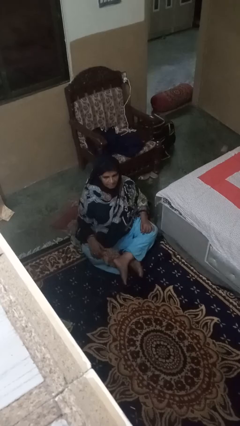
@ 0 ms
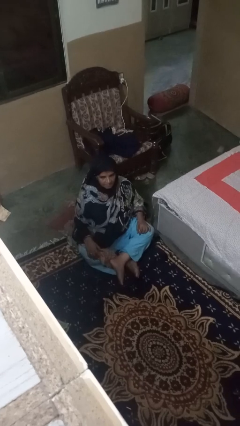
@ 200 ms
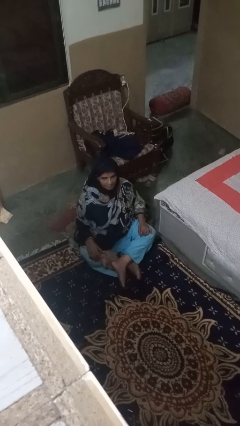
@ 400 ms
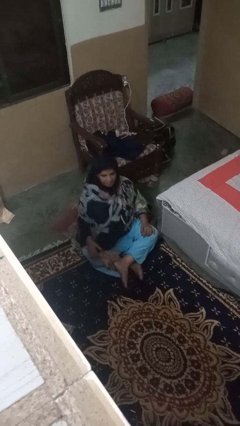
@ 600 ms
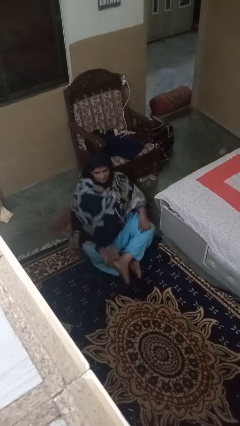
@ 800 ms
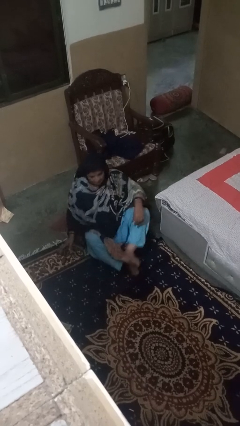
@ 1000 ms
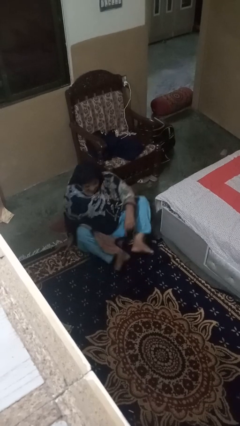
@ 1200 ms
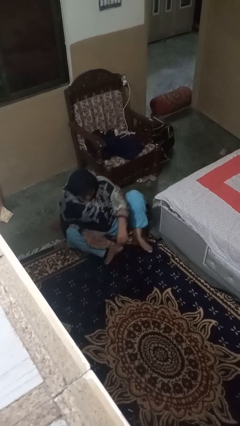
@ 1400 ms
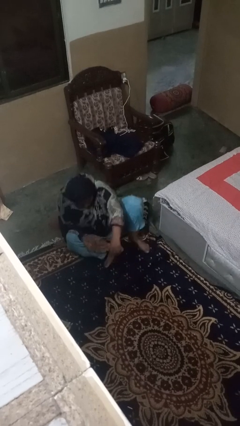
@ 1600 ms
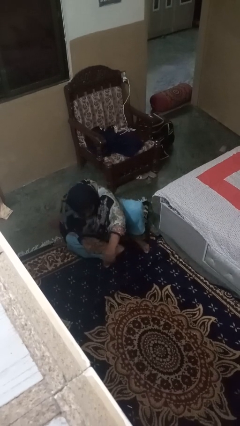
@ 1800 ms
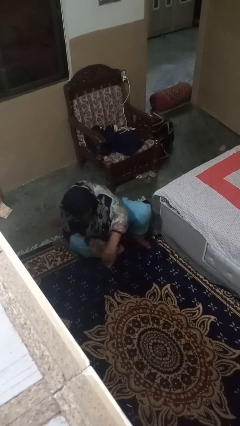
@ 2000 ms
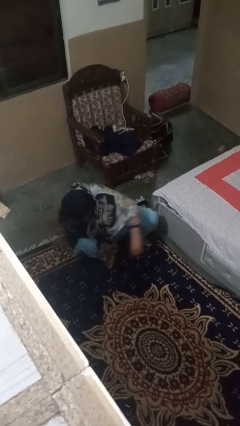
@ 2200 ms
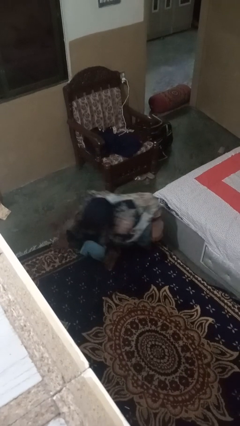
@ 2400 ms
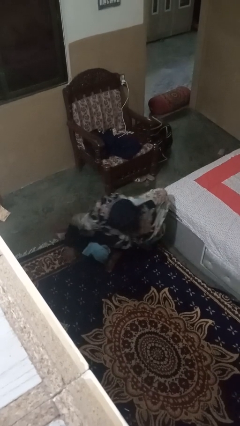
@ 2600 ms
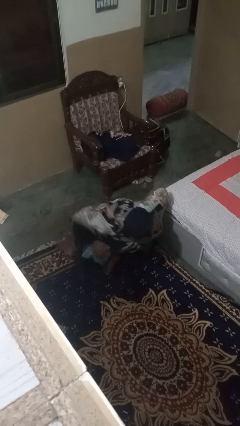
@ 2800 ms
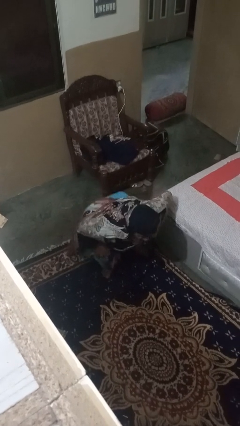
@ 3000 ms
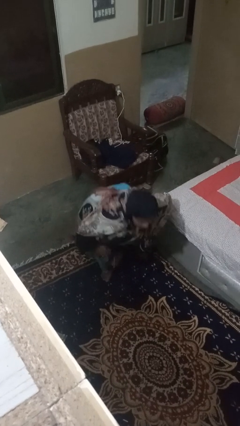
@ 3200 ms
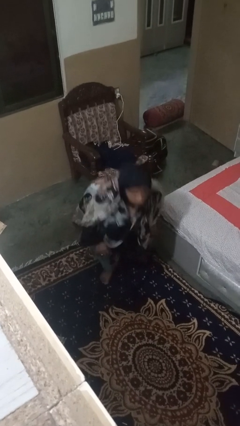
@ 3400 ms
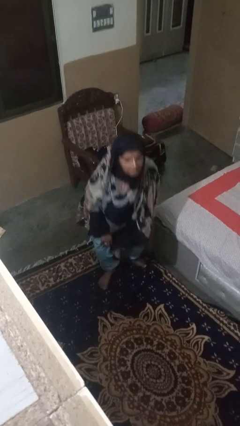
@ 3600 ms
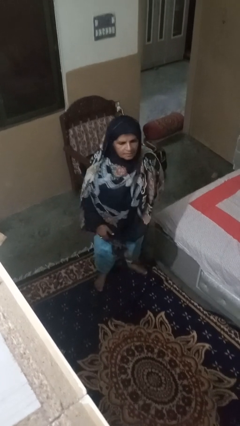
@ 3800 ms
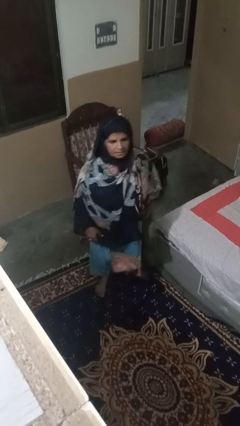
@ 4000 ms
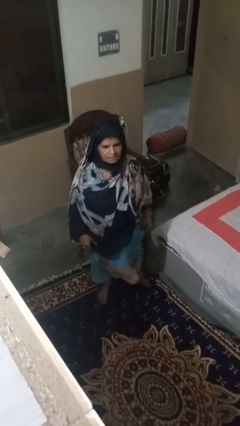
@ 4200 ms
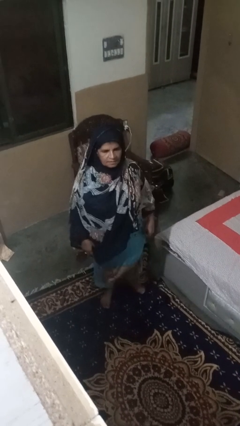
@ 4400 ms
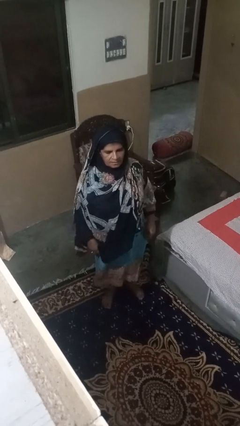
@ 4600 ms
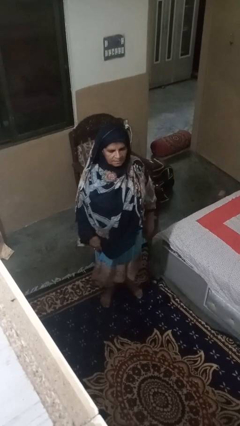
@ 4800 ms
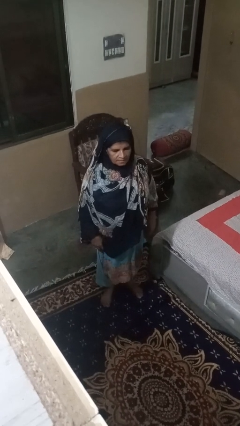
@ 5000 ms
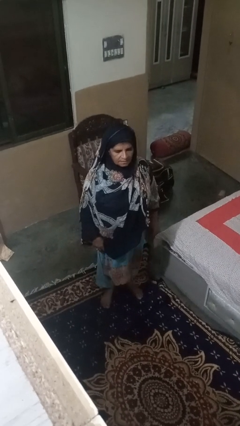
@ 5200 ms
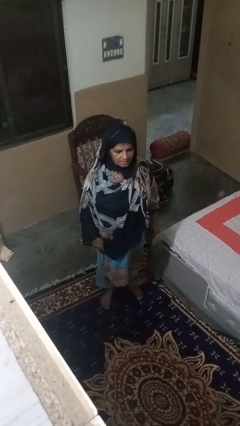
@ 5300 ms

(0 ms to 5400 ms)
person stands up from floor

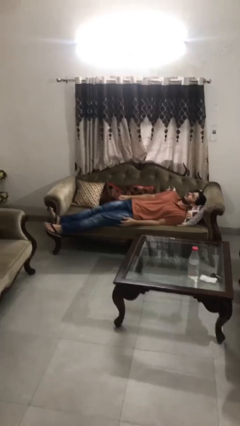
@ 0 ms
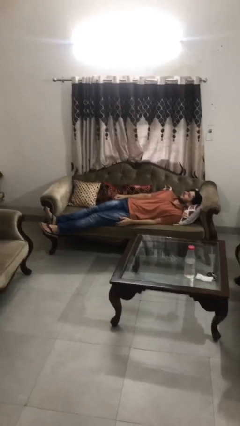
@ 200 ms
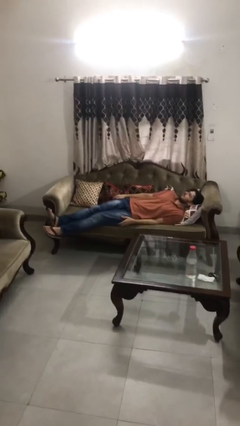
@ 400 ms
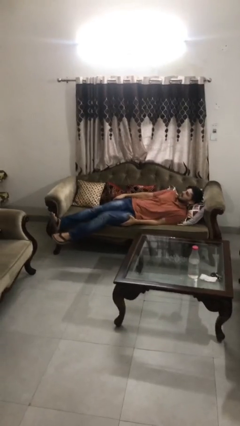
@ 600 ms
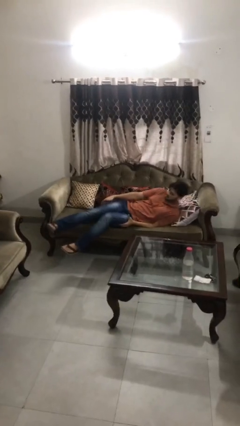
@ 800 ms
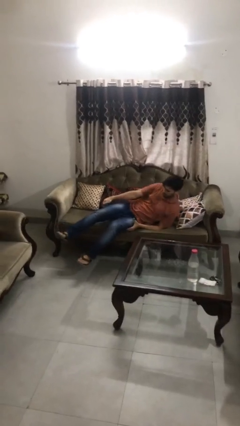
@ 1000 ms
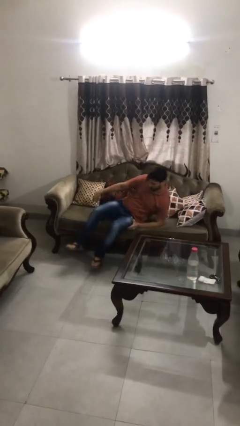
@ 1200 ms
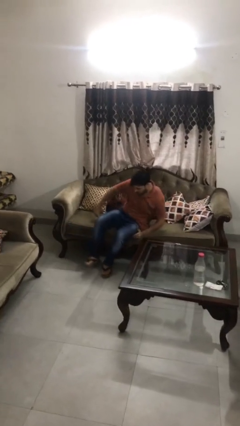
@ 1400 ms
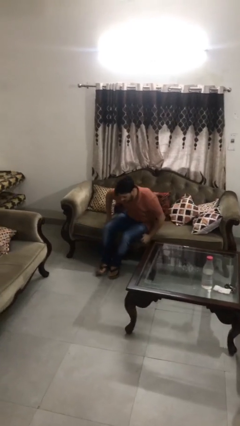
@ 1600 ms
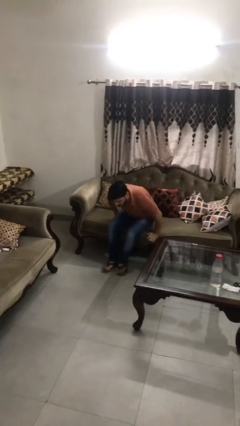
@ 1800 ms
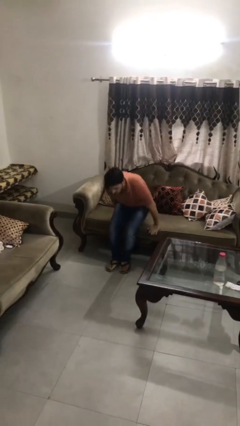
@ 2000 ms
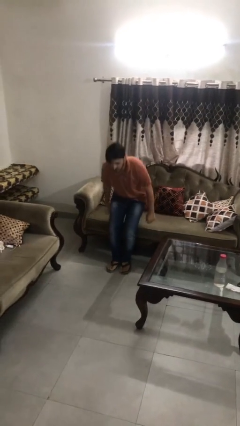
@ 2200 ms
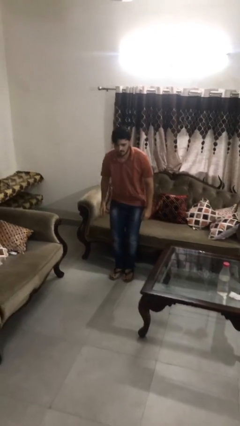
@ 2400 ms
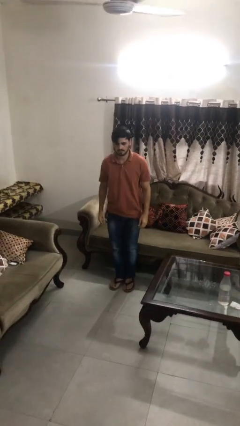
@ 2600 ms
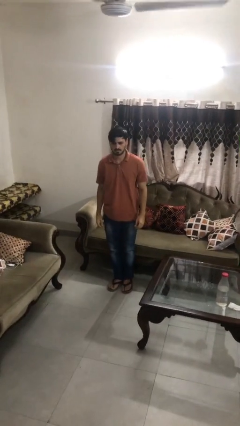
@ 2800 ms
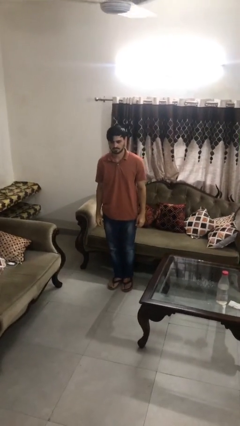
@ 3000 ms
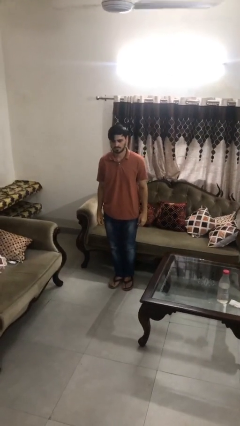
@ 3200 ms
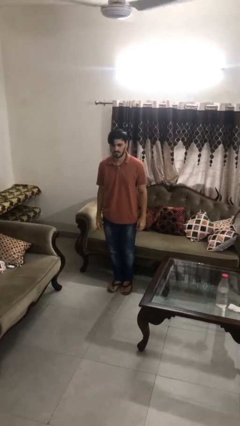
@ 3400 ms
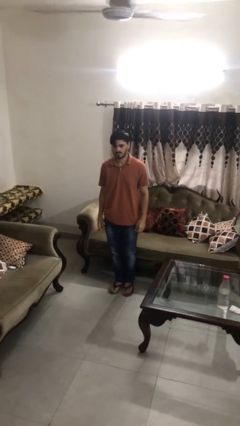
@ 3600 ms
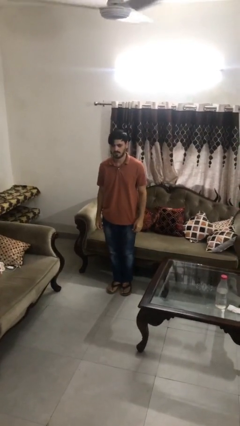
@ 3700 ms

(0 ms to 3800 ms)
person stands up

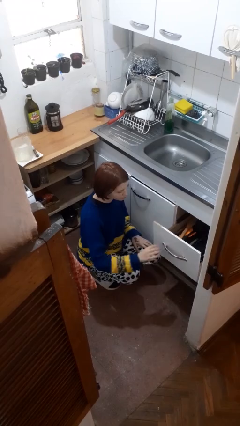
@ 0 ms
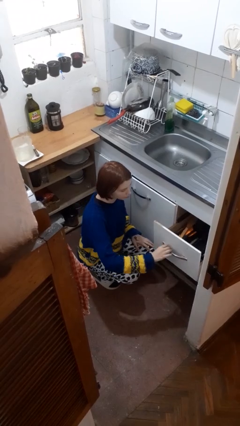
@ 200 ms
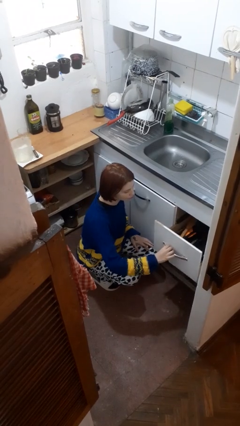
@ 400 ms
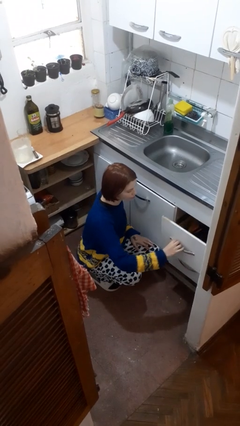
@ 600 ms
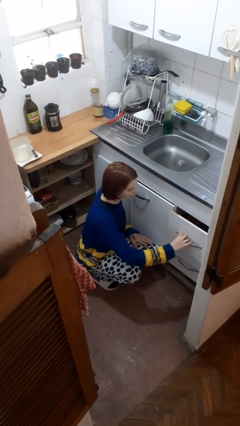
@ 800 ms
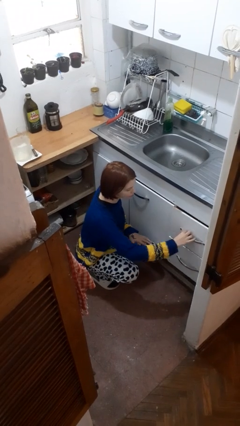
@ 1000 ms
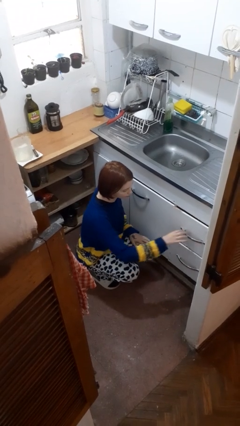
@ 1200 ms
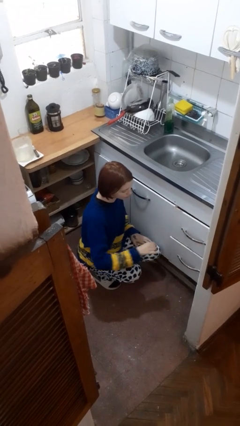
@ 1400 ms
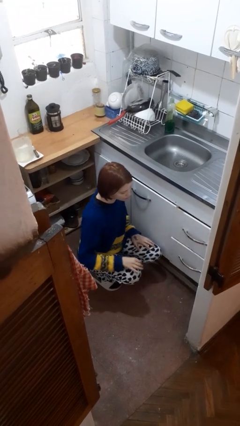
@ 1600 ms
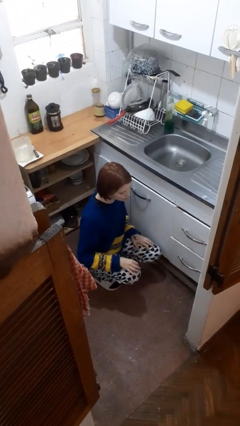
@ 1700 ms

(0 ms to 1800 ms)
person closes kitchen drawer

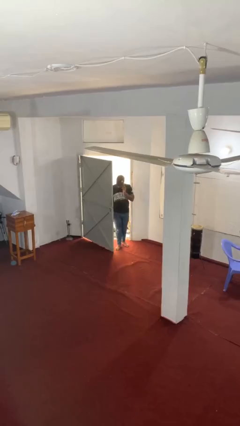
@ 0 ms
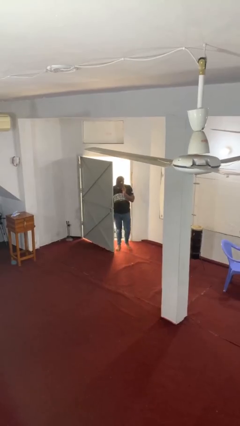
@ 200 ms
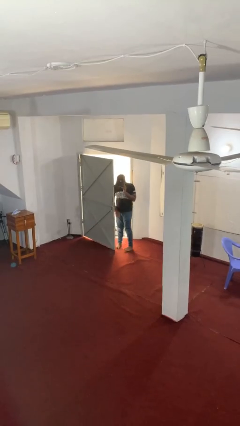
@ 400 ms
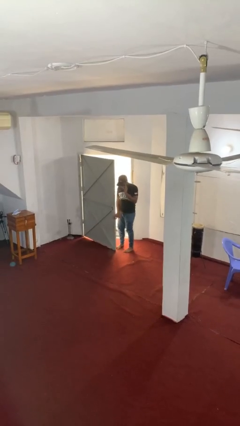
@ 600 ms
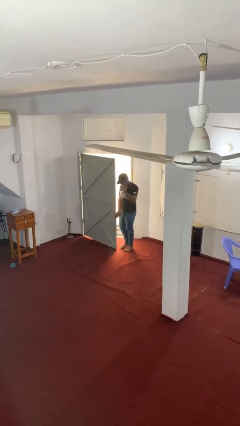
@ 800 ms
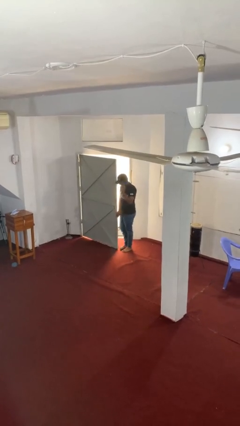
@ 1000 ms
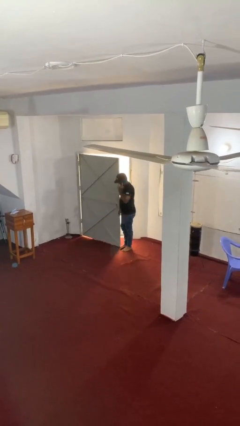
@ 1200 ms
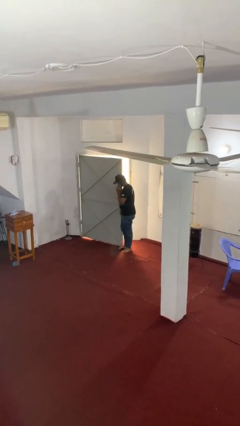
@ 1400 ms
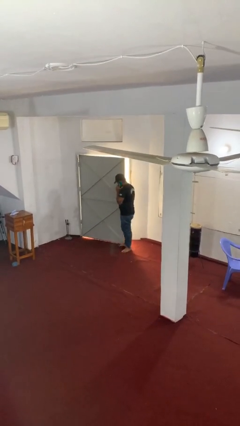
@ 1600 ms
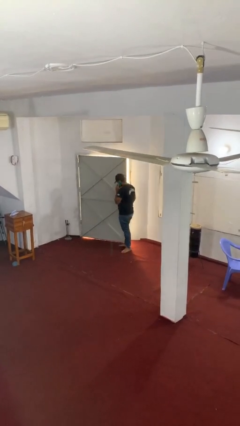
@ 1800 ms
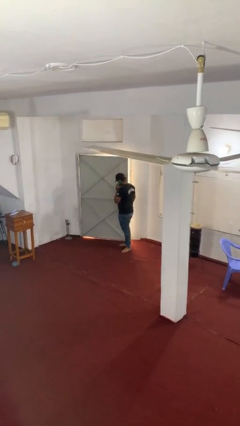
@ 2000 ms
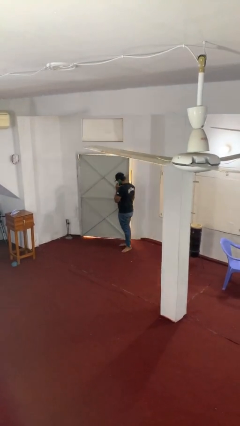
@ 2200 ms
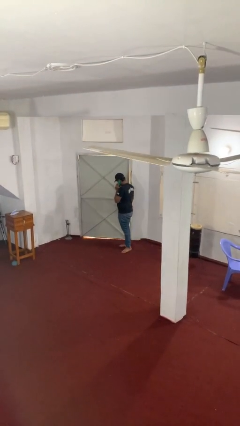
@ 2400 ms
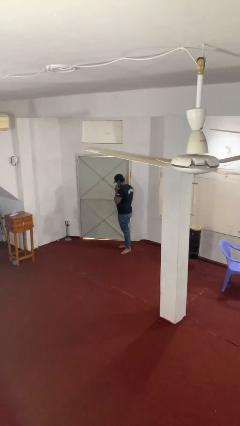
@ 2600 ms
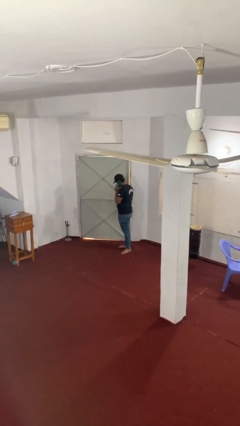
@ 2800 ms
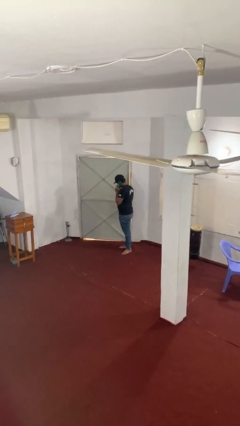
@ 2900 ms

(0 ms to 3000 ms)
person closes facility door

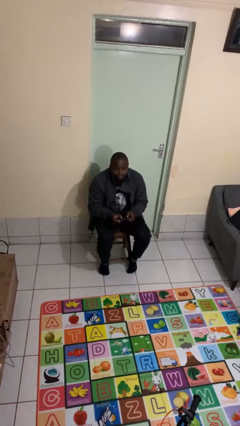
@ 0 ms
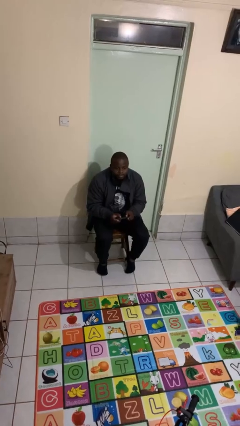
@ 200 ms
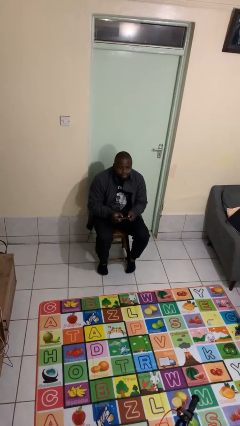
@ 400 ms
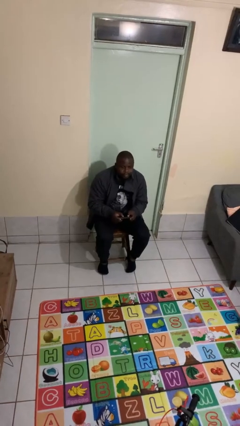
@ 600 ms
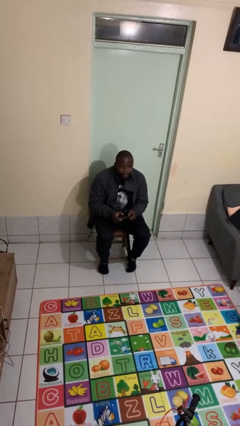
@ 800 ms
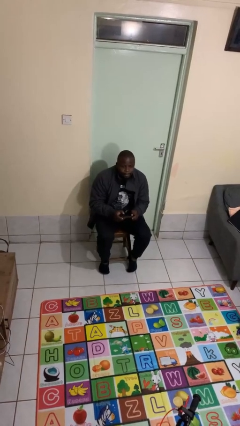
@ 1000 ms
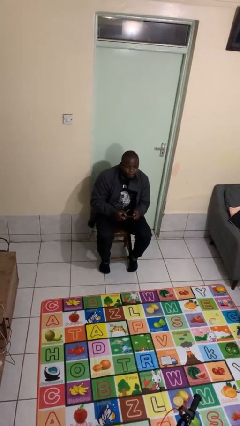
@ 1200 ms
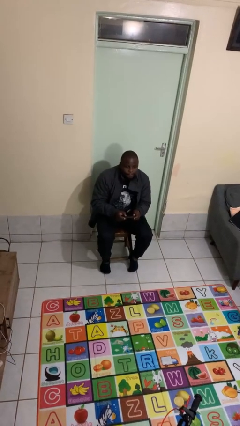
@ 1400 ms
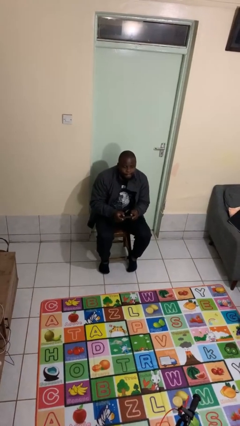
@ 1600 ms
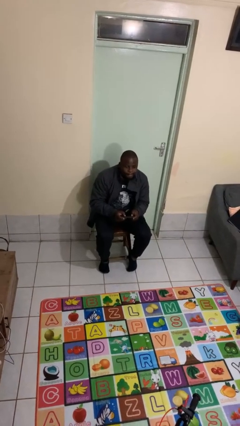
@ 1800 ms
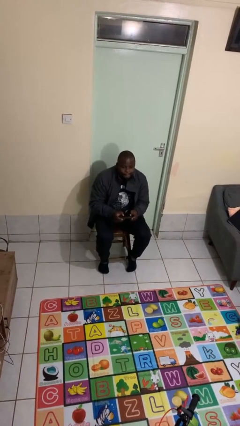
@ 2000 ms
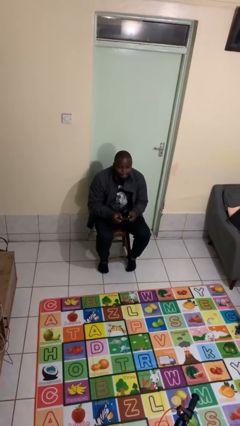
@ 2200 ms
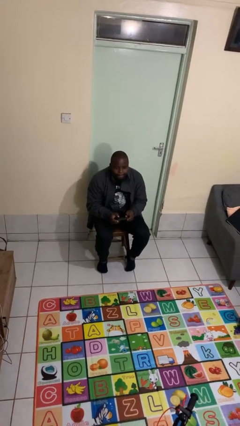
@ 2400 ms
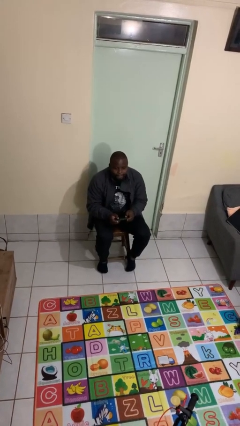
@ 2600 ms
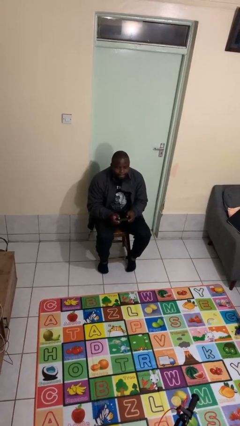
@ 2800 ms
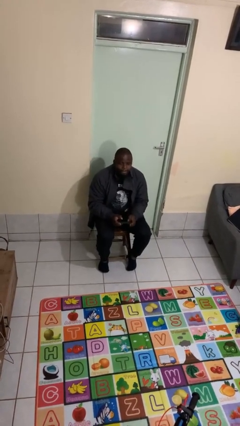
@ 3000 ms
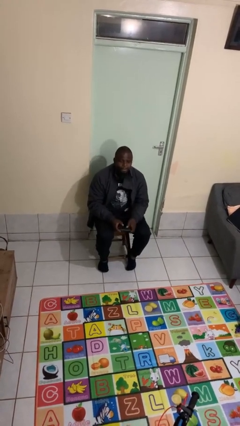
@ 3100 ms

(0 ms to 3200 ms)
person interacts with handheld game
